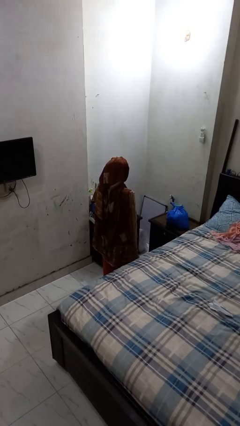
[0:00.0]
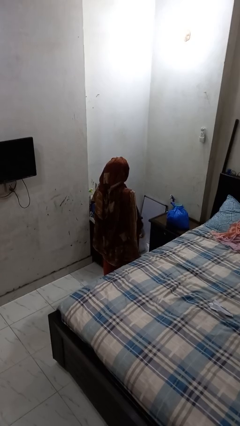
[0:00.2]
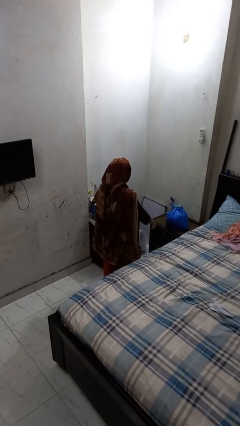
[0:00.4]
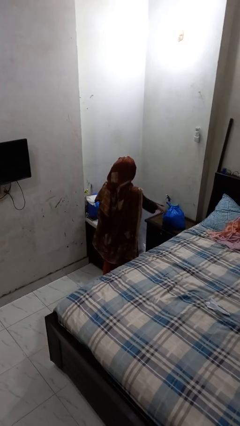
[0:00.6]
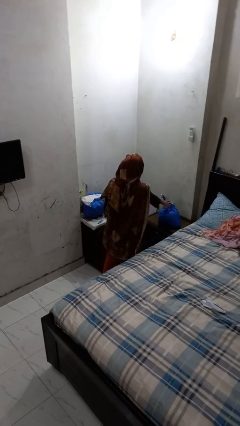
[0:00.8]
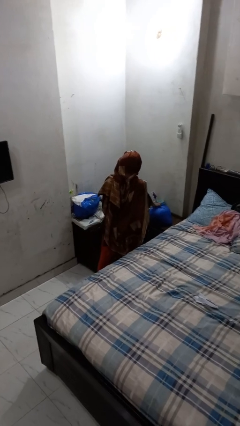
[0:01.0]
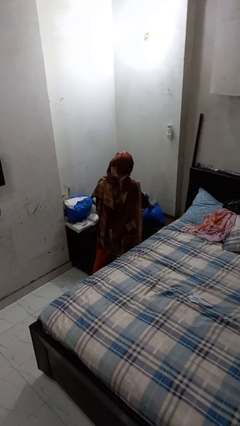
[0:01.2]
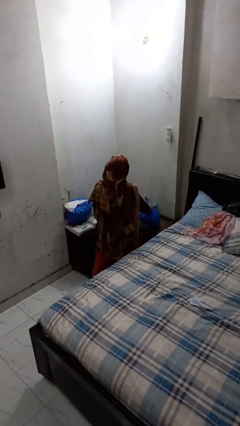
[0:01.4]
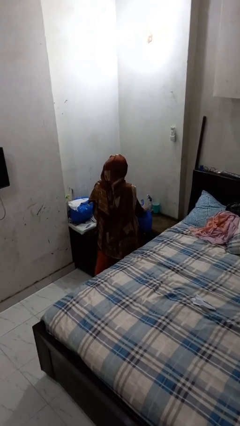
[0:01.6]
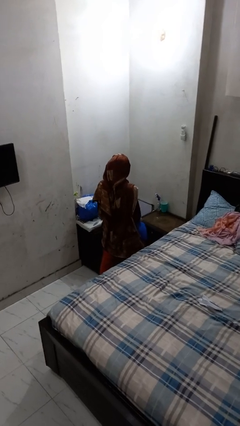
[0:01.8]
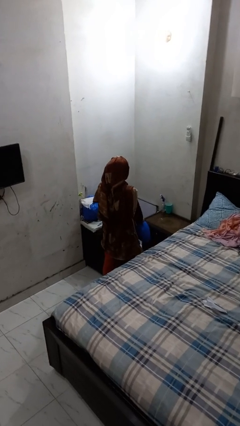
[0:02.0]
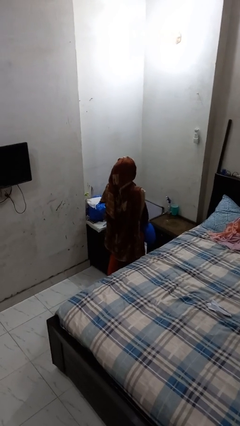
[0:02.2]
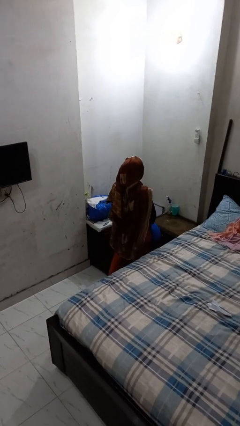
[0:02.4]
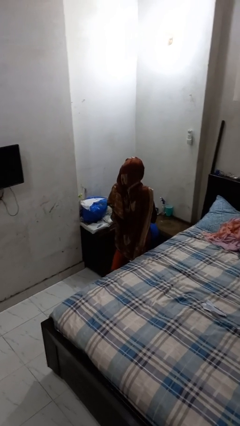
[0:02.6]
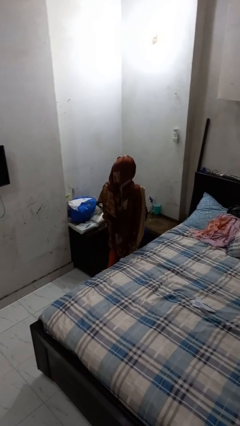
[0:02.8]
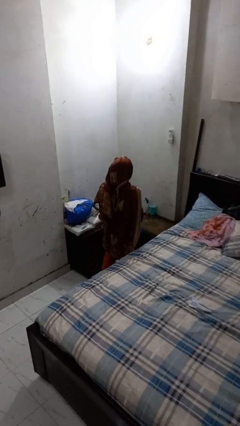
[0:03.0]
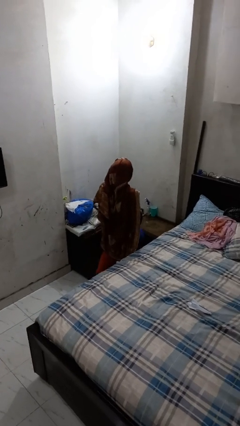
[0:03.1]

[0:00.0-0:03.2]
person picks up object from table

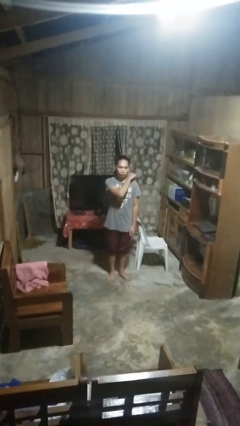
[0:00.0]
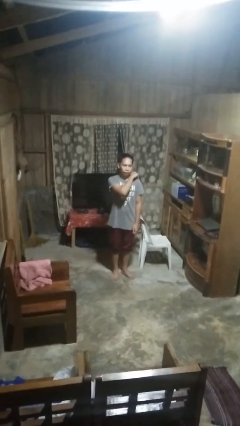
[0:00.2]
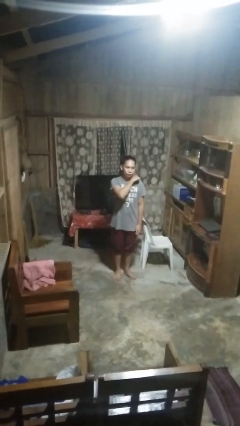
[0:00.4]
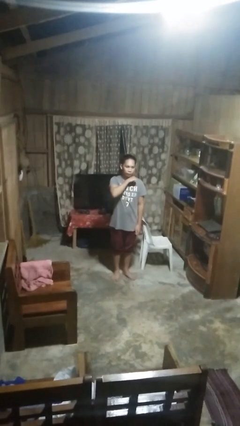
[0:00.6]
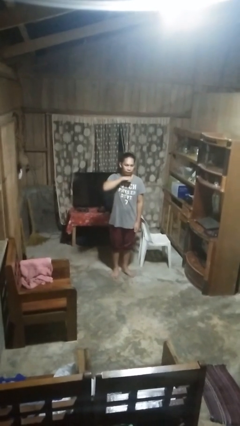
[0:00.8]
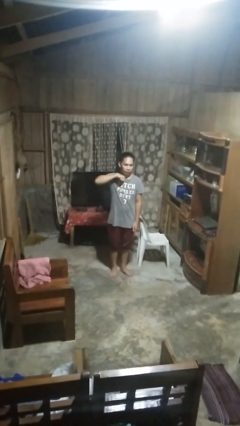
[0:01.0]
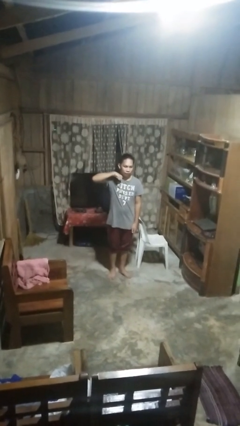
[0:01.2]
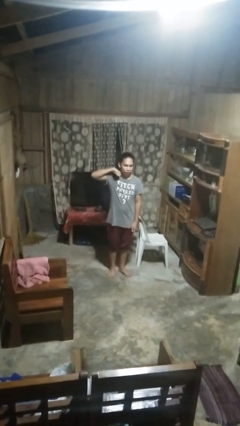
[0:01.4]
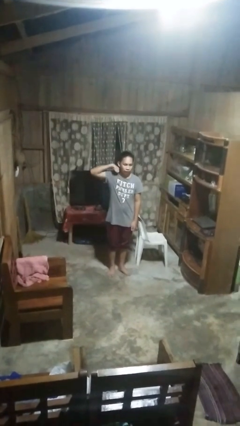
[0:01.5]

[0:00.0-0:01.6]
person gestures cut

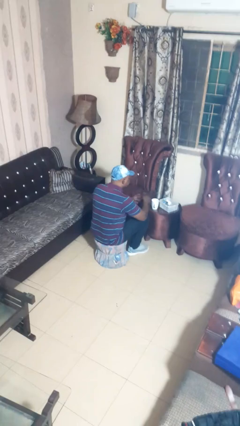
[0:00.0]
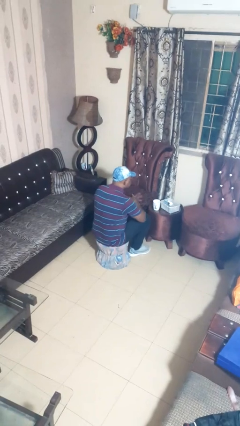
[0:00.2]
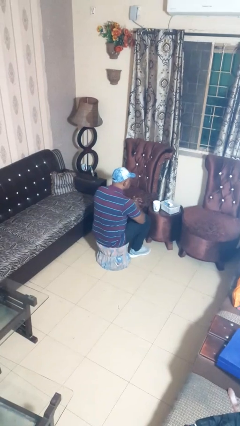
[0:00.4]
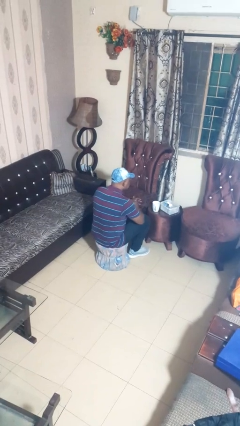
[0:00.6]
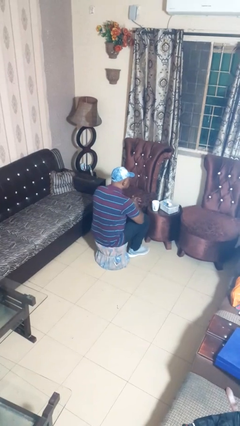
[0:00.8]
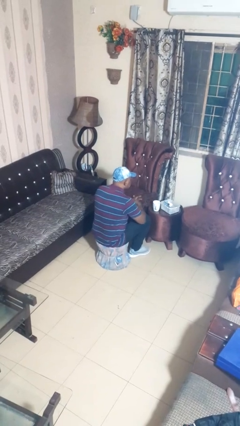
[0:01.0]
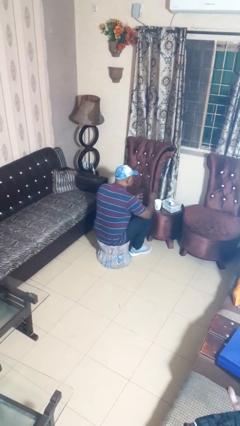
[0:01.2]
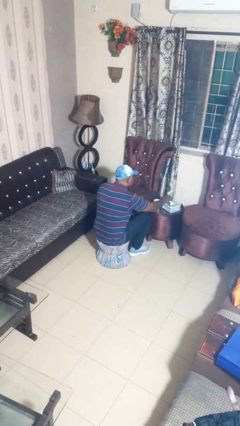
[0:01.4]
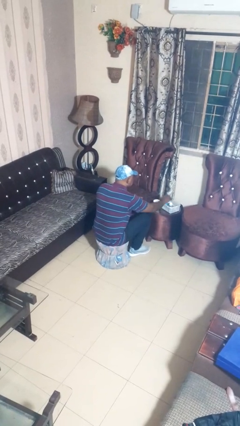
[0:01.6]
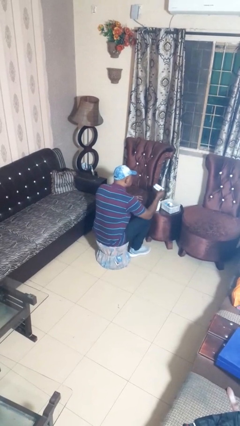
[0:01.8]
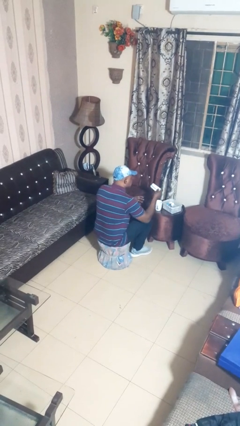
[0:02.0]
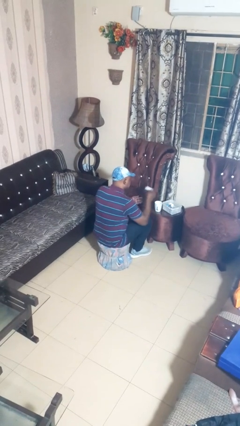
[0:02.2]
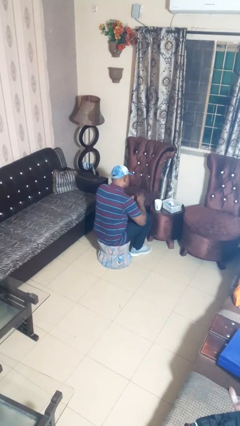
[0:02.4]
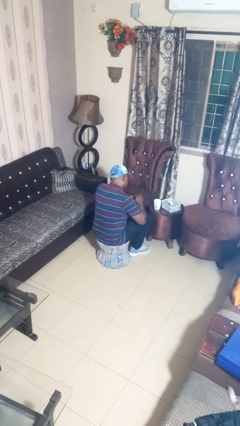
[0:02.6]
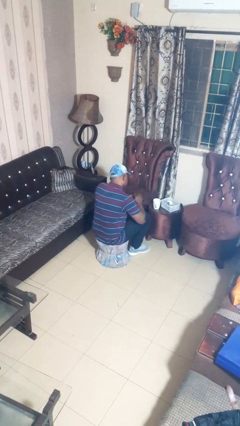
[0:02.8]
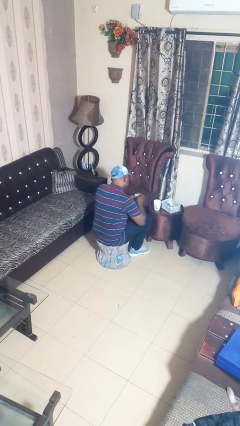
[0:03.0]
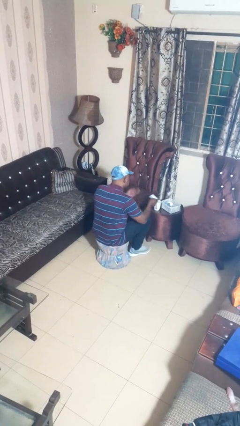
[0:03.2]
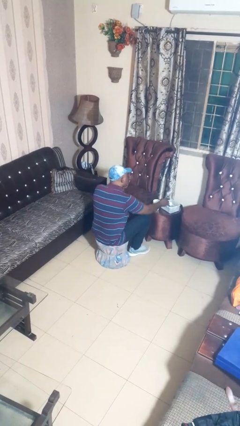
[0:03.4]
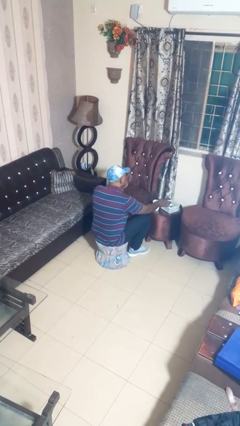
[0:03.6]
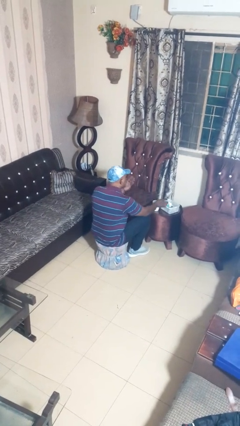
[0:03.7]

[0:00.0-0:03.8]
person takes medicine pills

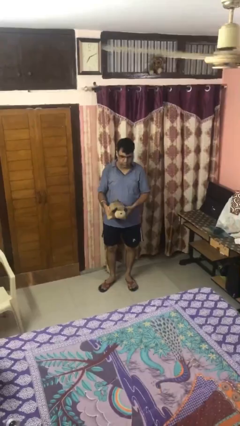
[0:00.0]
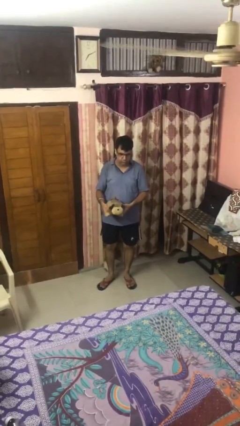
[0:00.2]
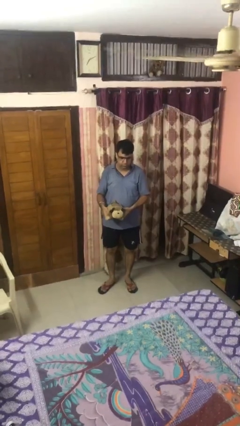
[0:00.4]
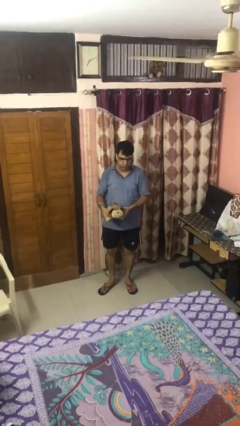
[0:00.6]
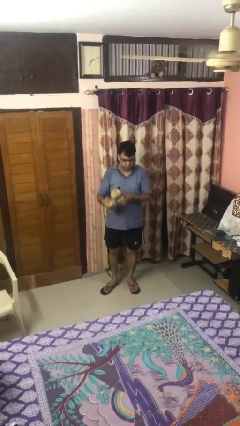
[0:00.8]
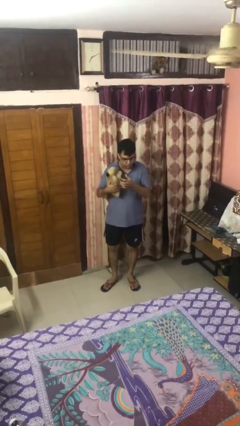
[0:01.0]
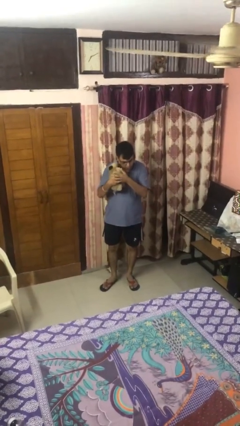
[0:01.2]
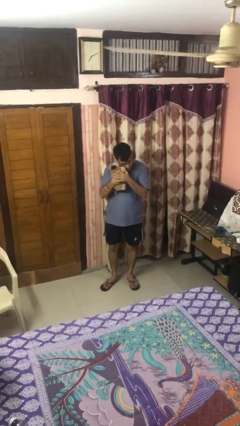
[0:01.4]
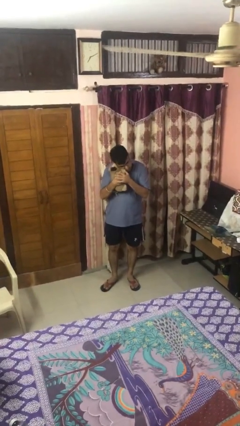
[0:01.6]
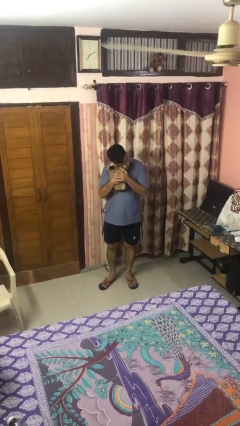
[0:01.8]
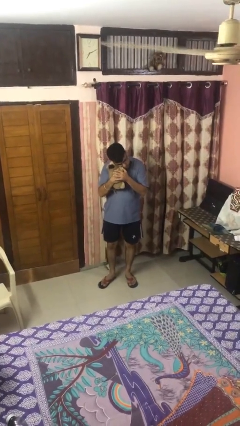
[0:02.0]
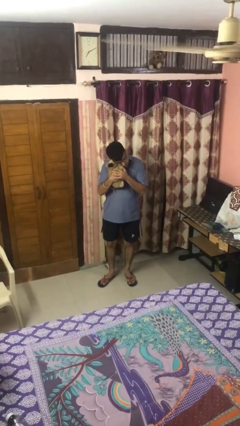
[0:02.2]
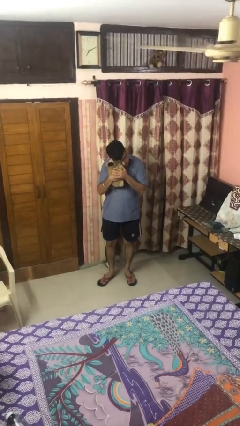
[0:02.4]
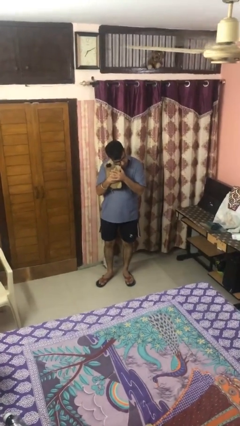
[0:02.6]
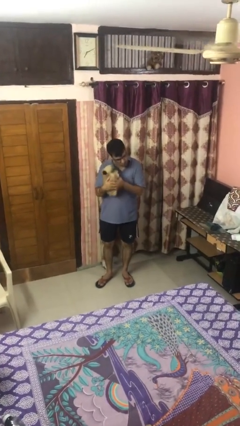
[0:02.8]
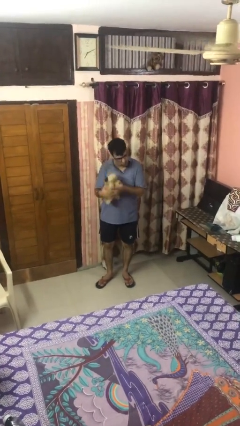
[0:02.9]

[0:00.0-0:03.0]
person hugs stuffed animal

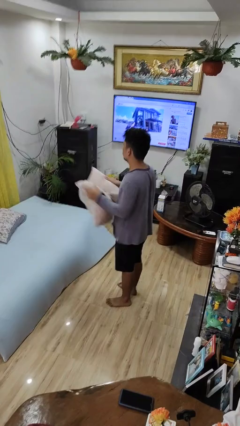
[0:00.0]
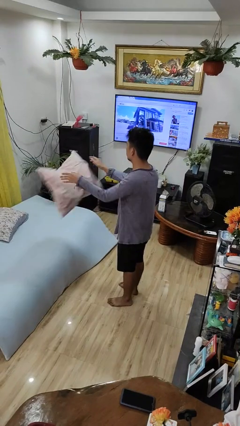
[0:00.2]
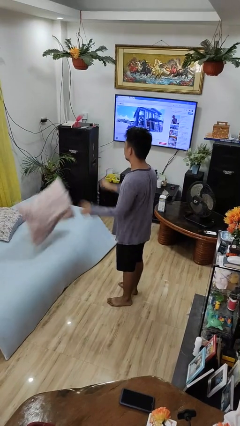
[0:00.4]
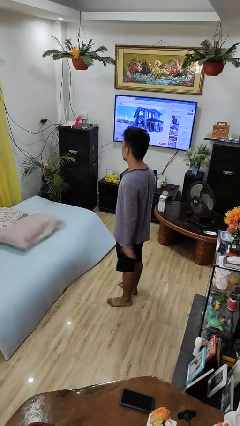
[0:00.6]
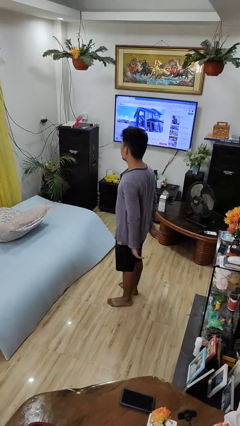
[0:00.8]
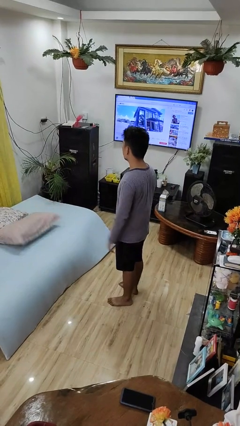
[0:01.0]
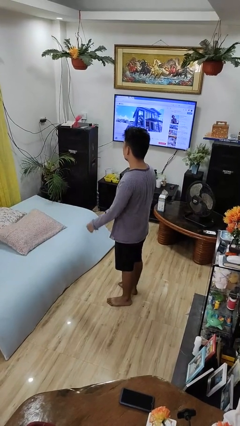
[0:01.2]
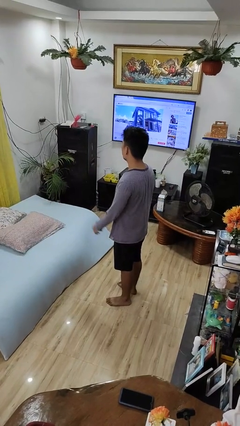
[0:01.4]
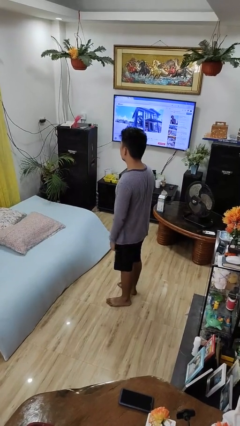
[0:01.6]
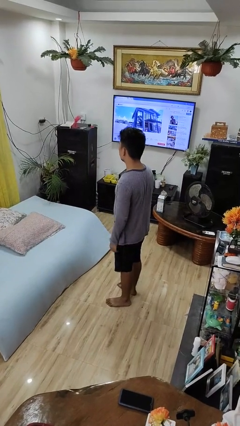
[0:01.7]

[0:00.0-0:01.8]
person throws object on bed

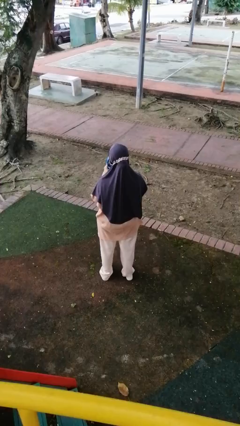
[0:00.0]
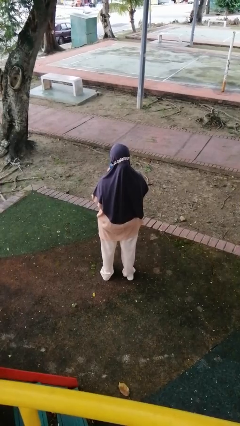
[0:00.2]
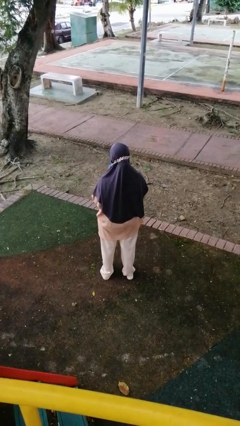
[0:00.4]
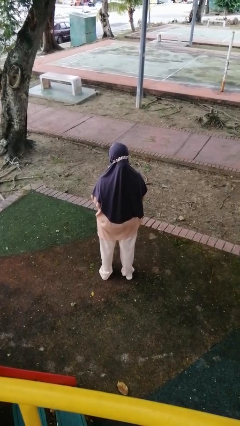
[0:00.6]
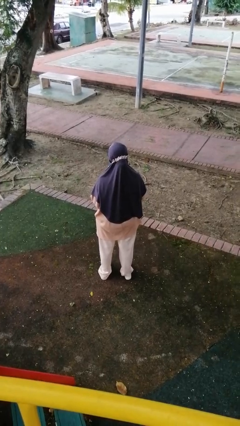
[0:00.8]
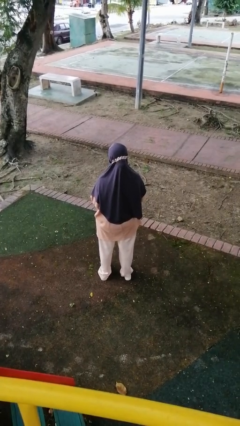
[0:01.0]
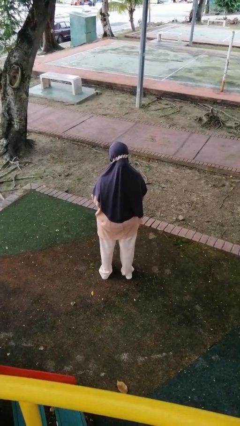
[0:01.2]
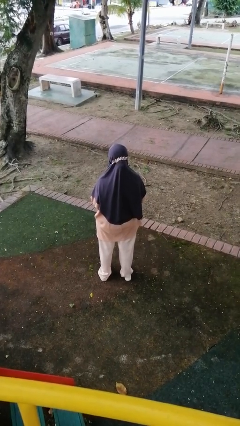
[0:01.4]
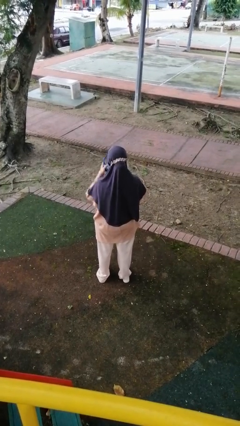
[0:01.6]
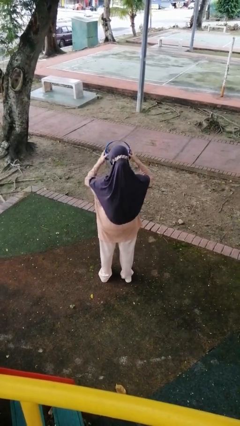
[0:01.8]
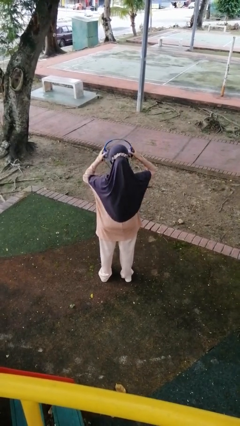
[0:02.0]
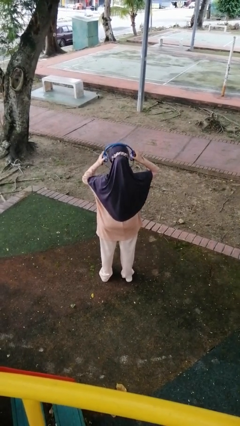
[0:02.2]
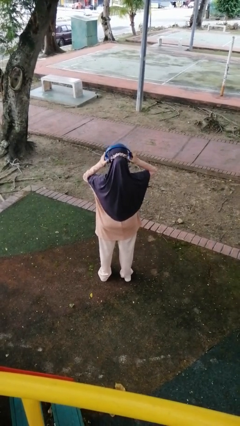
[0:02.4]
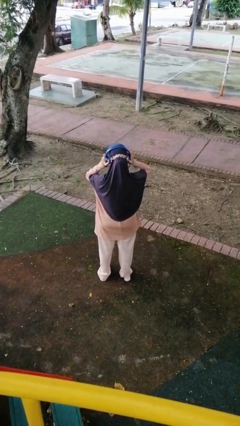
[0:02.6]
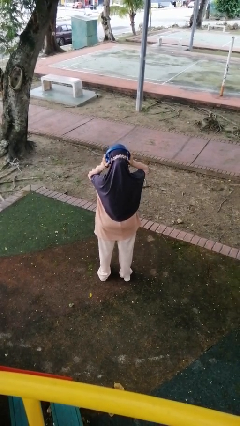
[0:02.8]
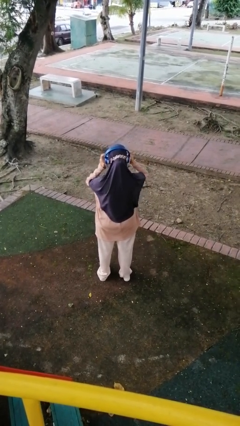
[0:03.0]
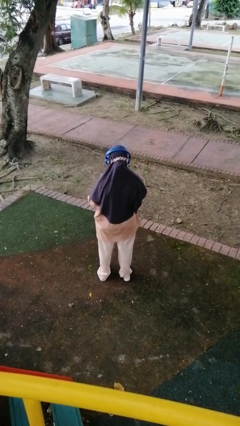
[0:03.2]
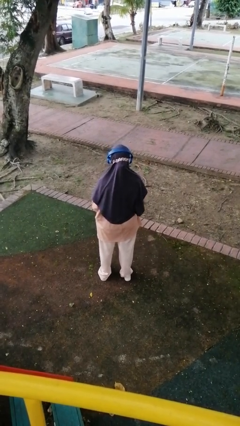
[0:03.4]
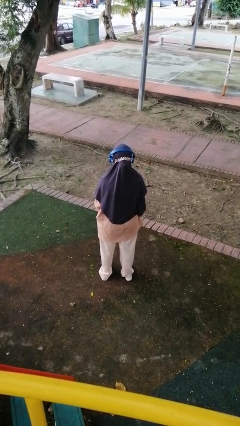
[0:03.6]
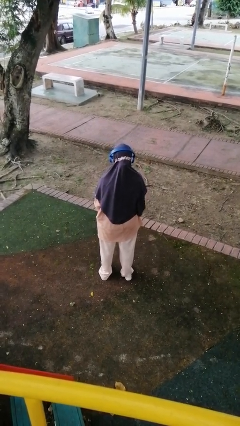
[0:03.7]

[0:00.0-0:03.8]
person puts on headphones

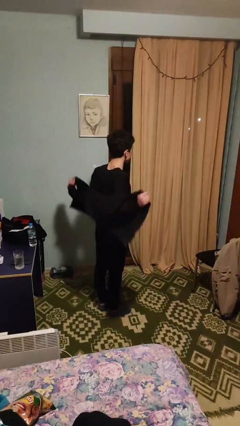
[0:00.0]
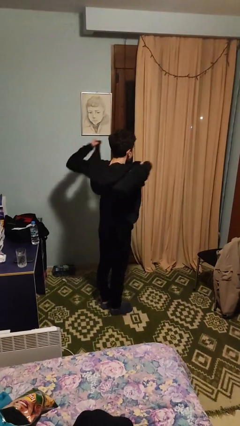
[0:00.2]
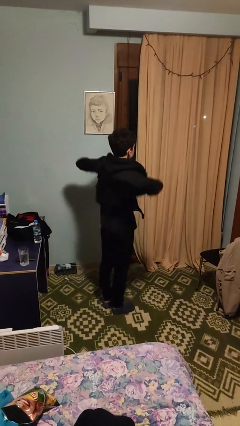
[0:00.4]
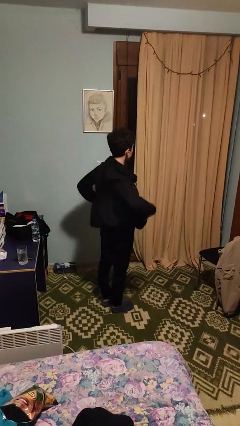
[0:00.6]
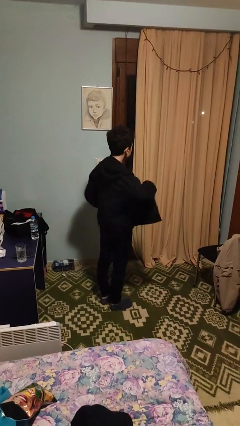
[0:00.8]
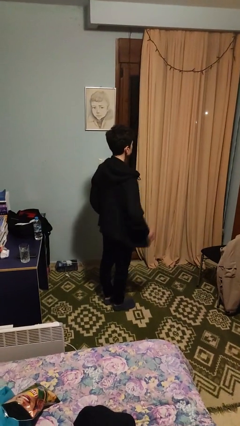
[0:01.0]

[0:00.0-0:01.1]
person puts on jacket
